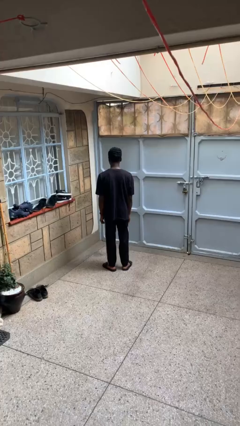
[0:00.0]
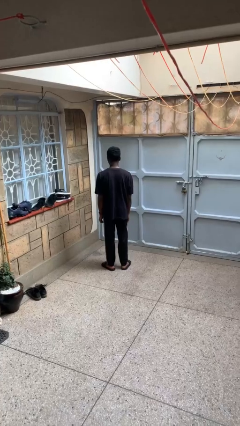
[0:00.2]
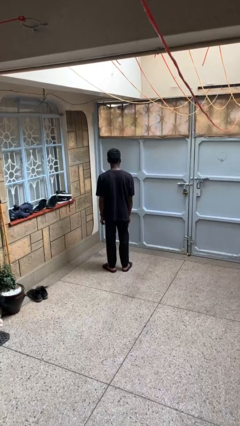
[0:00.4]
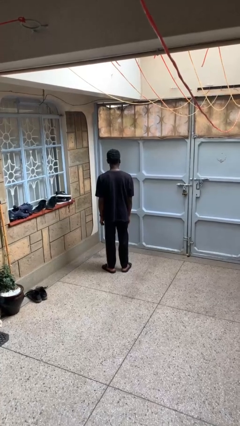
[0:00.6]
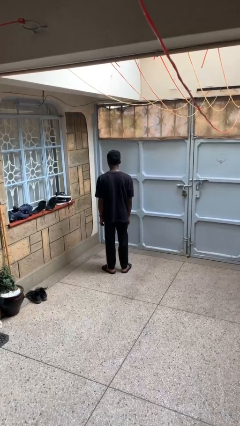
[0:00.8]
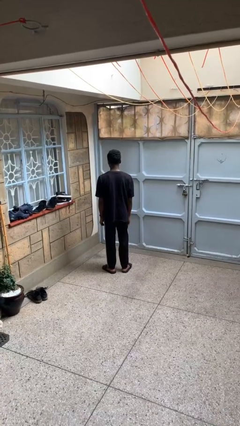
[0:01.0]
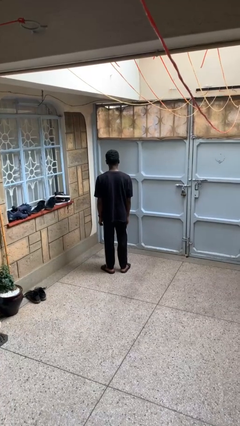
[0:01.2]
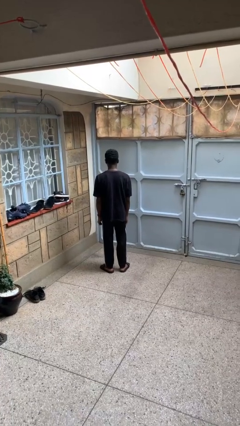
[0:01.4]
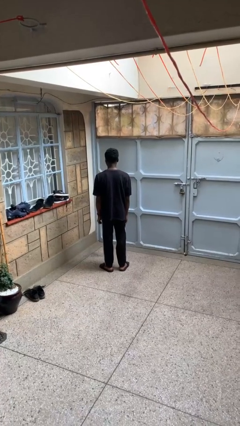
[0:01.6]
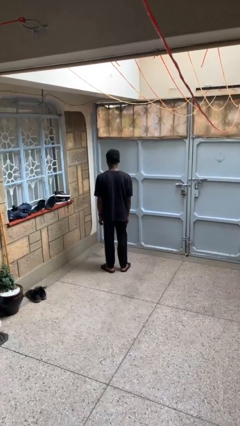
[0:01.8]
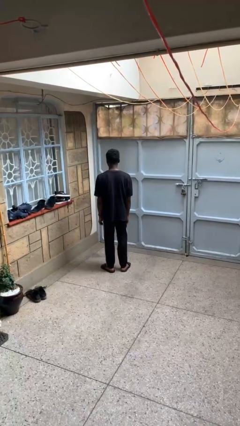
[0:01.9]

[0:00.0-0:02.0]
person shakes head

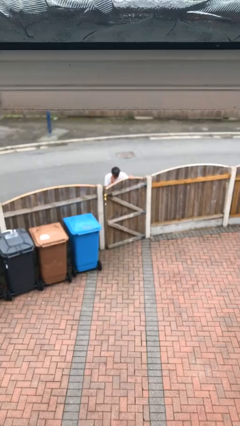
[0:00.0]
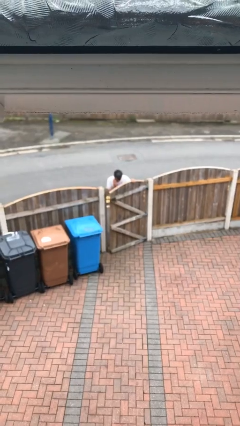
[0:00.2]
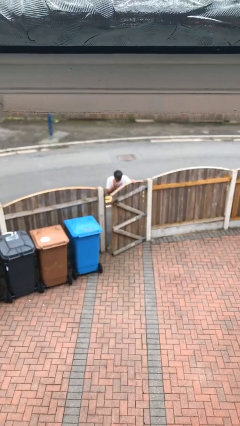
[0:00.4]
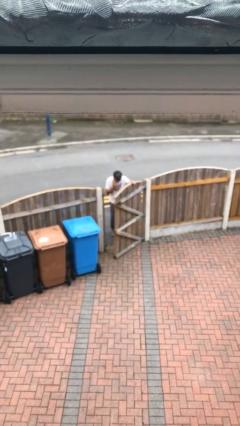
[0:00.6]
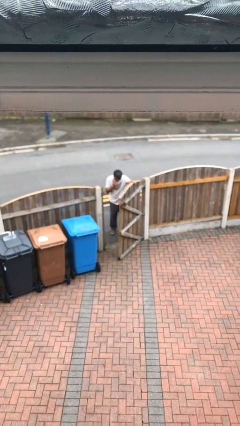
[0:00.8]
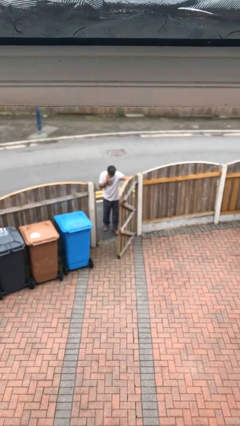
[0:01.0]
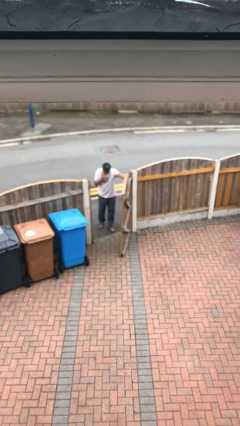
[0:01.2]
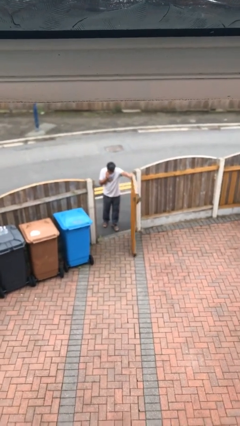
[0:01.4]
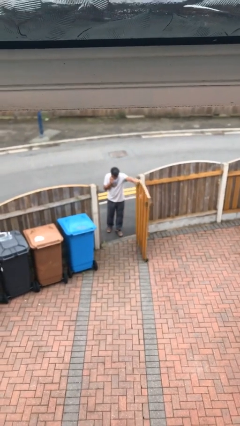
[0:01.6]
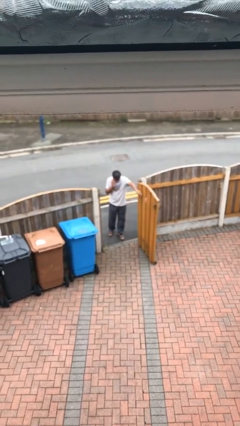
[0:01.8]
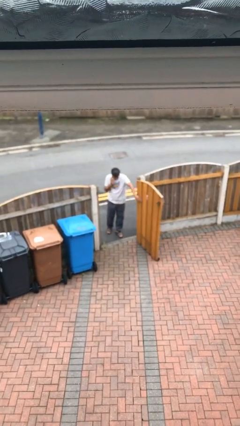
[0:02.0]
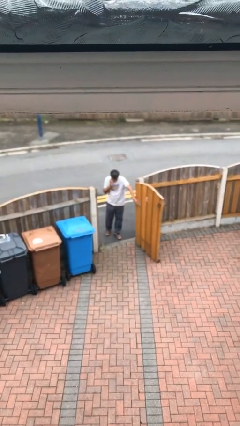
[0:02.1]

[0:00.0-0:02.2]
person opens facility door

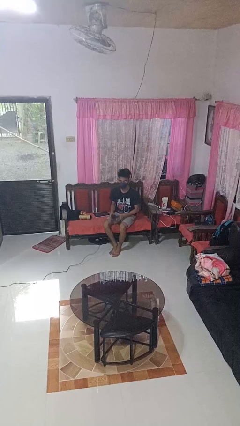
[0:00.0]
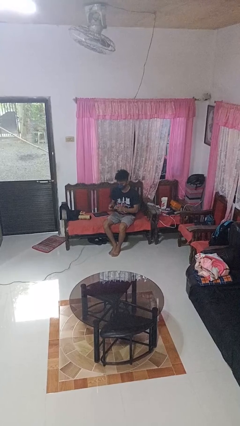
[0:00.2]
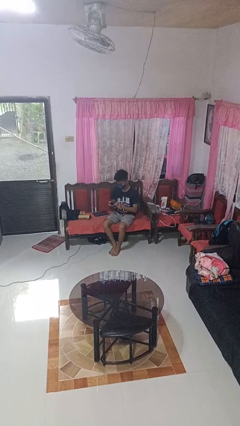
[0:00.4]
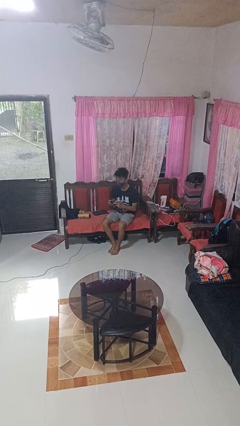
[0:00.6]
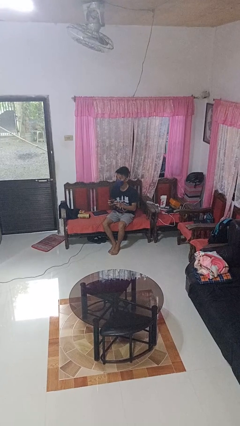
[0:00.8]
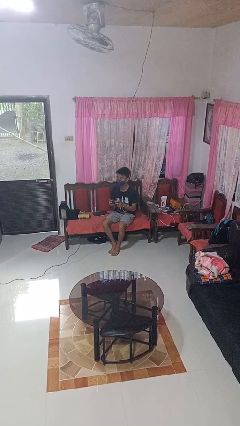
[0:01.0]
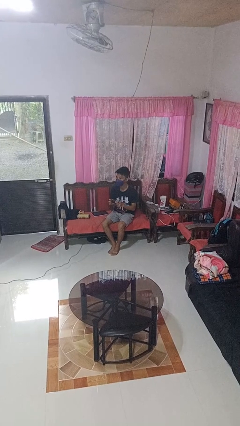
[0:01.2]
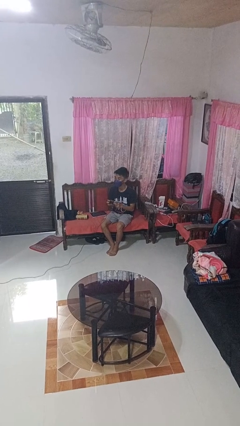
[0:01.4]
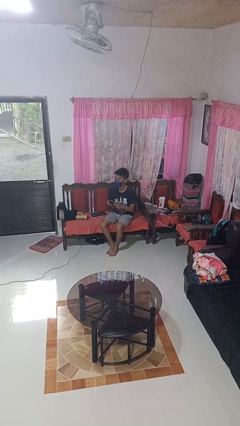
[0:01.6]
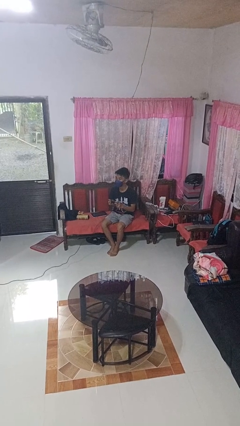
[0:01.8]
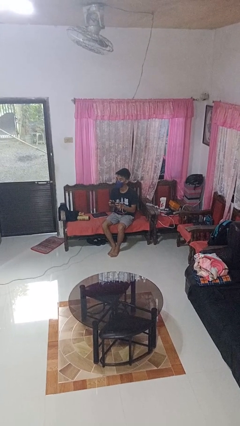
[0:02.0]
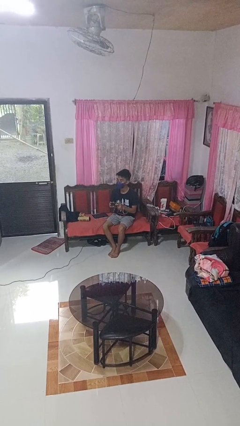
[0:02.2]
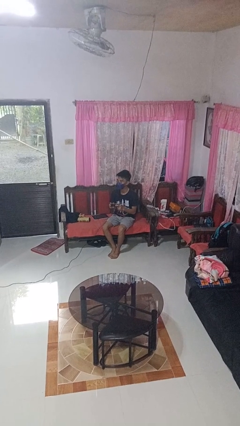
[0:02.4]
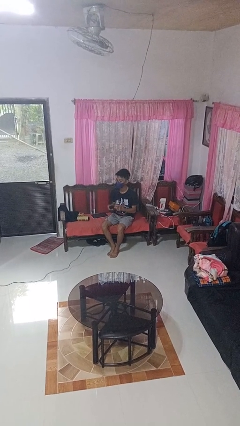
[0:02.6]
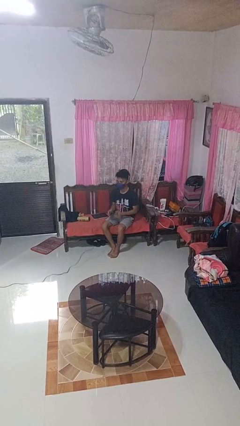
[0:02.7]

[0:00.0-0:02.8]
person interacts with handheld game

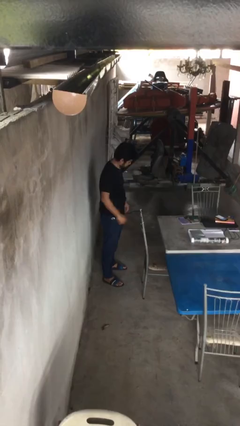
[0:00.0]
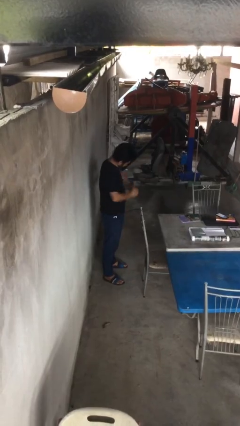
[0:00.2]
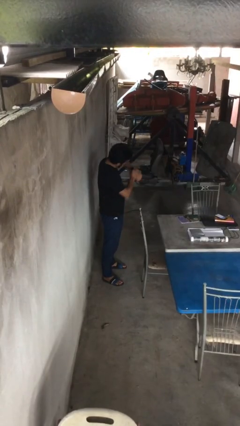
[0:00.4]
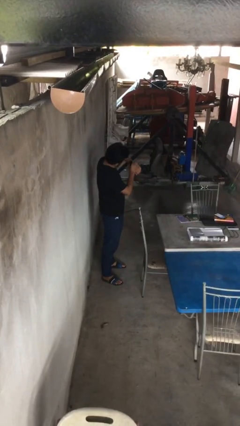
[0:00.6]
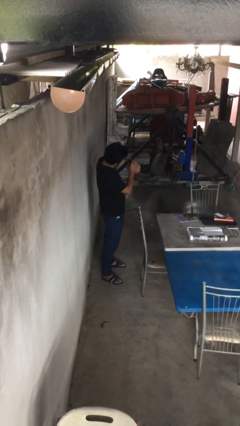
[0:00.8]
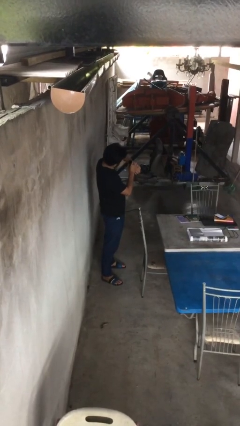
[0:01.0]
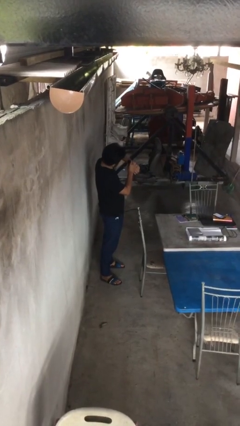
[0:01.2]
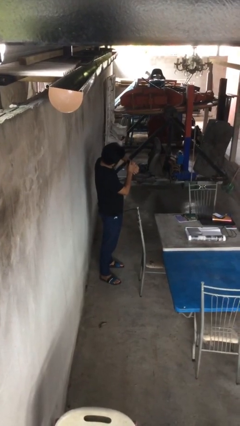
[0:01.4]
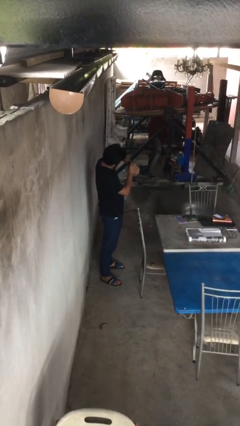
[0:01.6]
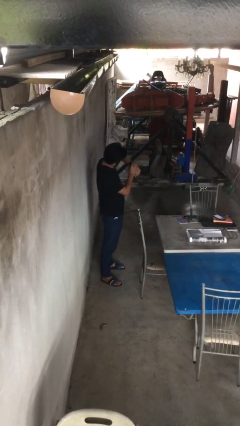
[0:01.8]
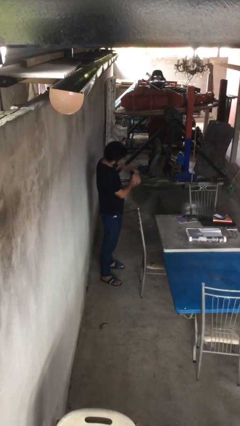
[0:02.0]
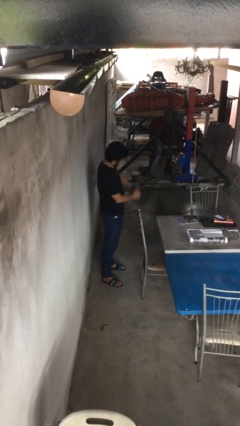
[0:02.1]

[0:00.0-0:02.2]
person looks at wristwatch

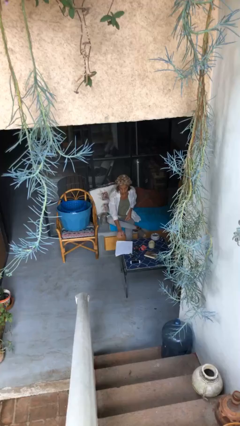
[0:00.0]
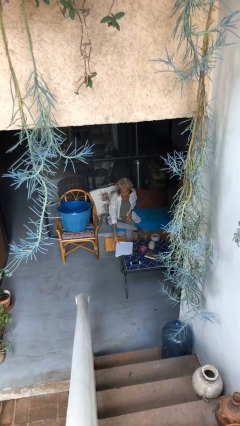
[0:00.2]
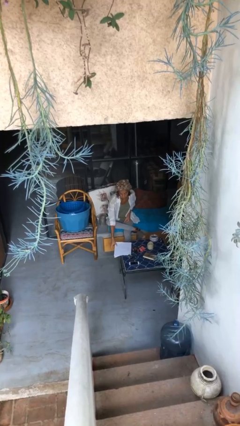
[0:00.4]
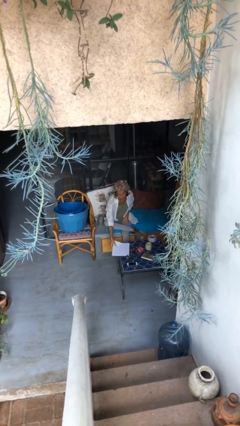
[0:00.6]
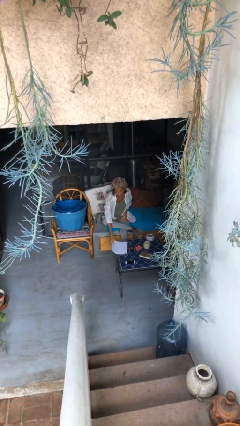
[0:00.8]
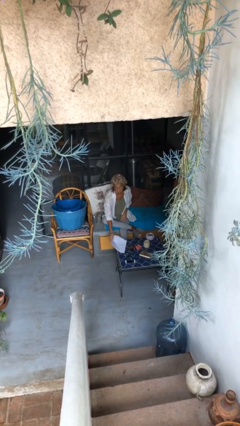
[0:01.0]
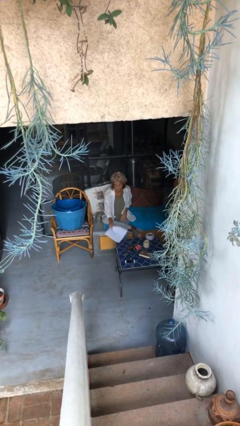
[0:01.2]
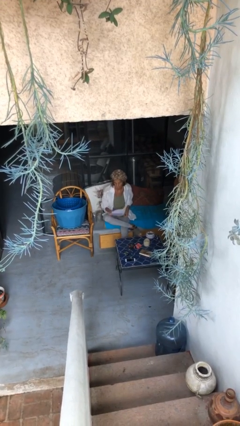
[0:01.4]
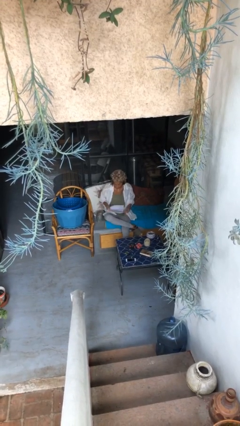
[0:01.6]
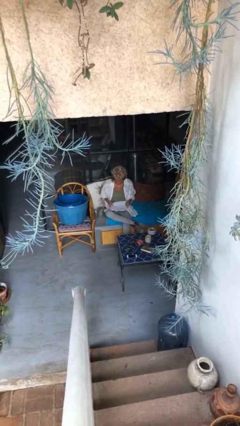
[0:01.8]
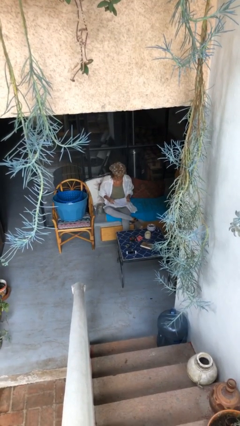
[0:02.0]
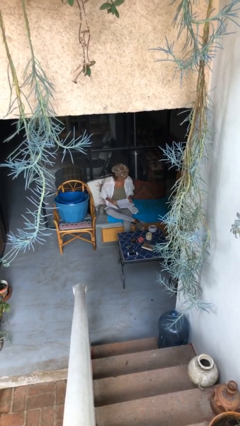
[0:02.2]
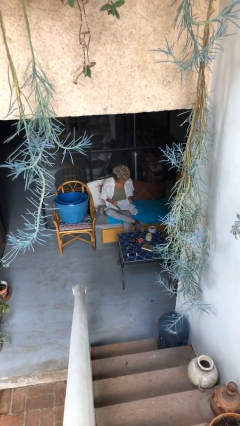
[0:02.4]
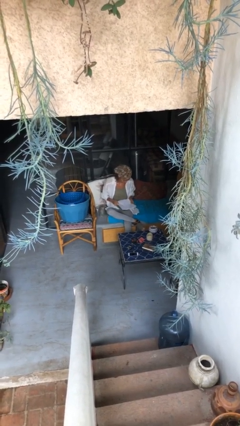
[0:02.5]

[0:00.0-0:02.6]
person picks up object from table

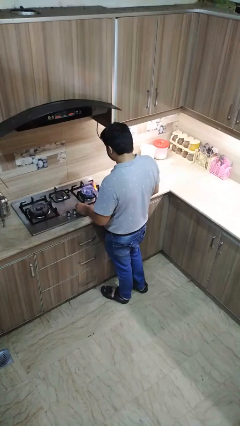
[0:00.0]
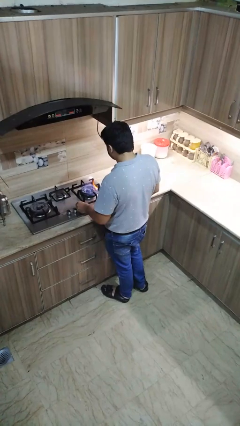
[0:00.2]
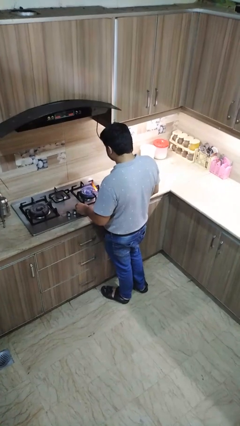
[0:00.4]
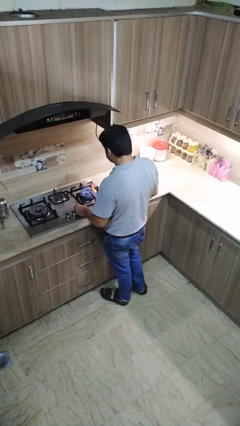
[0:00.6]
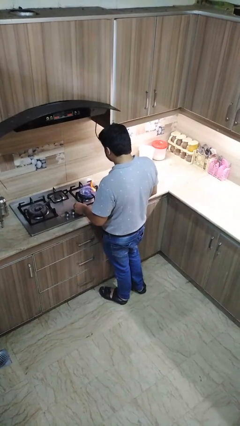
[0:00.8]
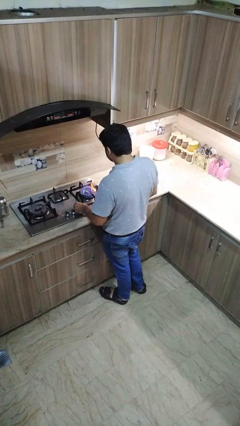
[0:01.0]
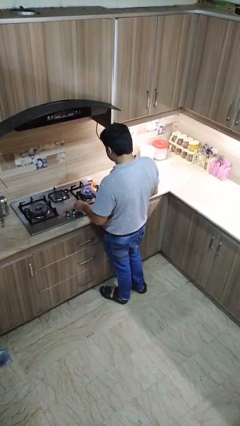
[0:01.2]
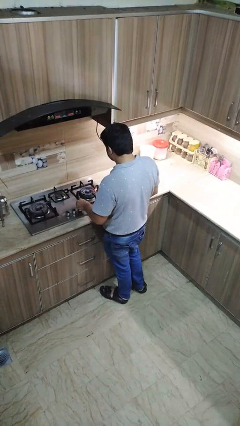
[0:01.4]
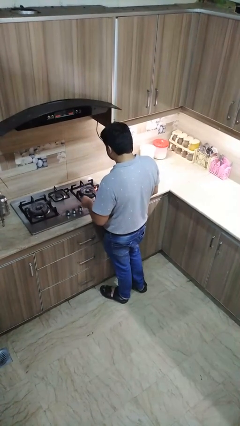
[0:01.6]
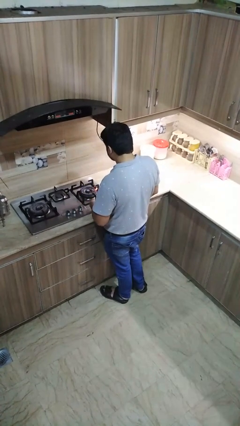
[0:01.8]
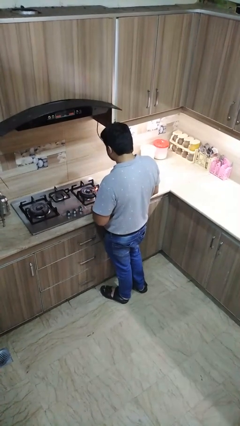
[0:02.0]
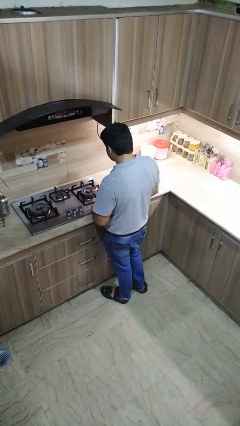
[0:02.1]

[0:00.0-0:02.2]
person turns off stovetop

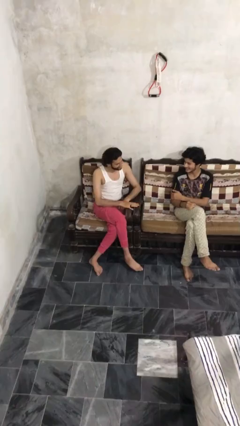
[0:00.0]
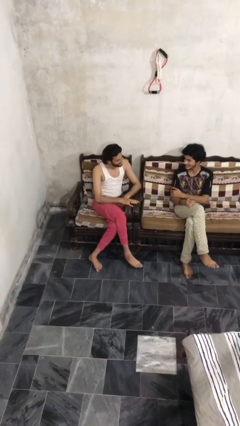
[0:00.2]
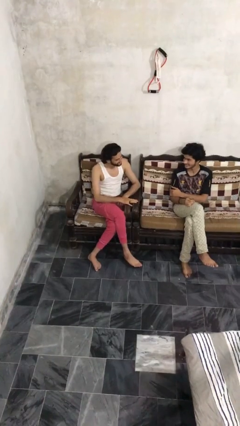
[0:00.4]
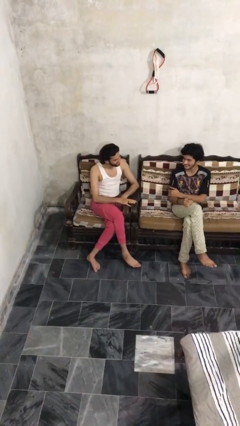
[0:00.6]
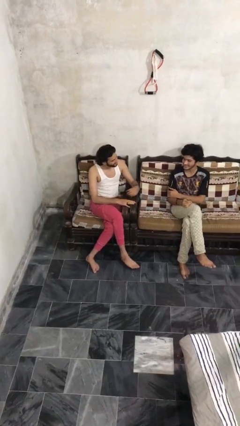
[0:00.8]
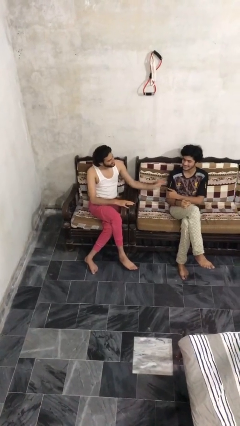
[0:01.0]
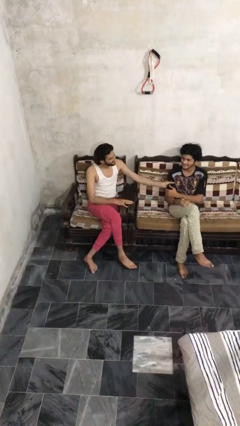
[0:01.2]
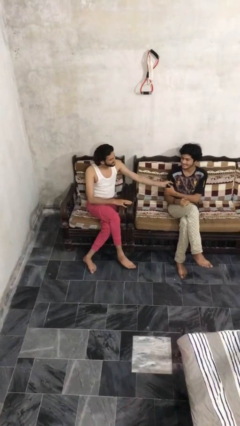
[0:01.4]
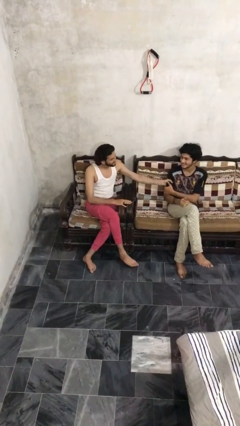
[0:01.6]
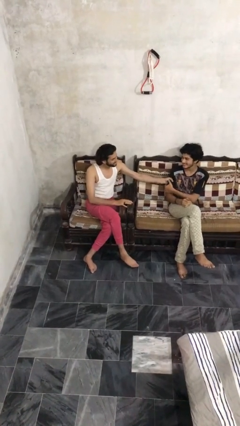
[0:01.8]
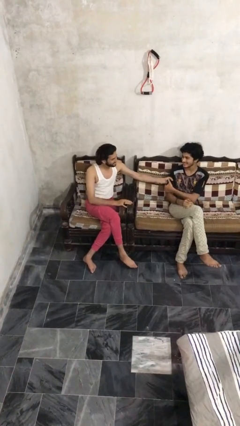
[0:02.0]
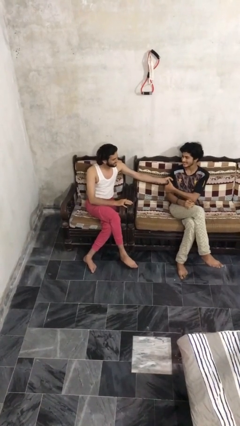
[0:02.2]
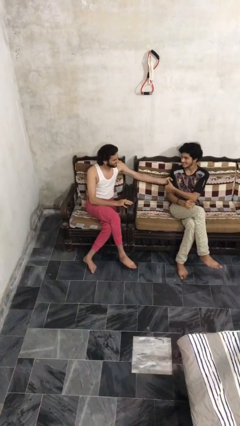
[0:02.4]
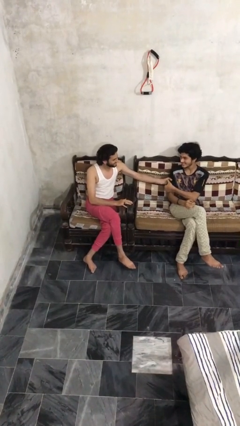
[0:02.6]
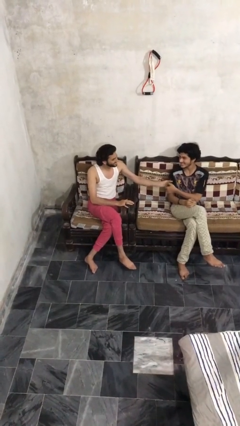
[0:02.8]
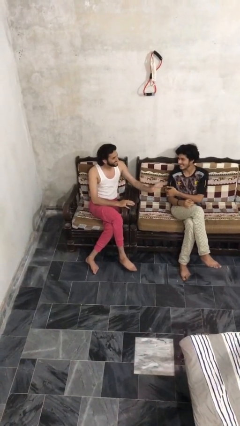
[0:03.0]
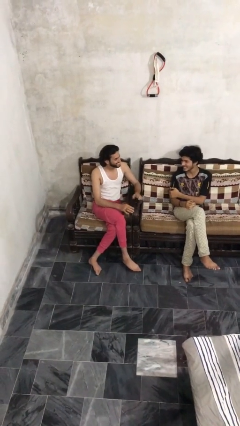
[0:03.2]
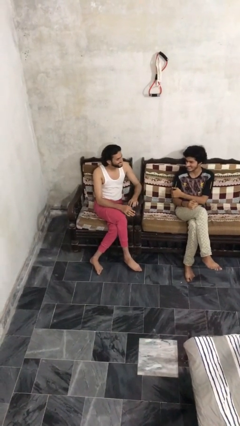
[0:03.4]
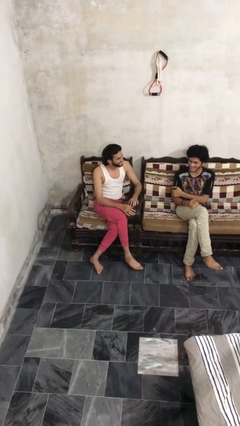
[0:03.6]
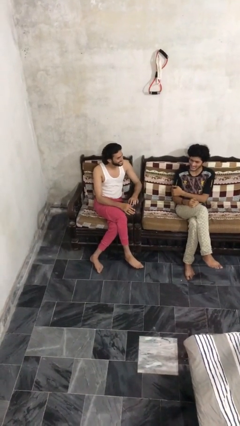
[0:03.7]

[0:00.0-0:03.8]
person grabs person by bicep
